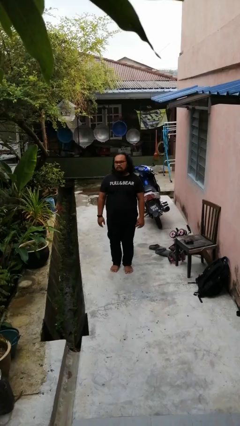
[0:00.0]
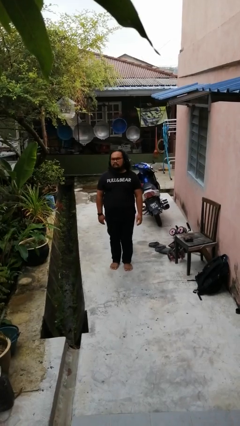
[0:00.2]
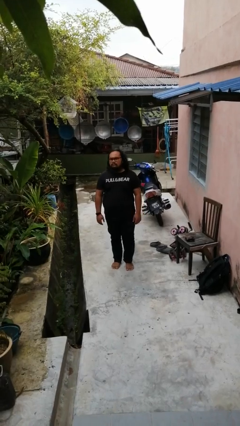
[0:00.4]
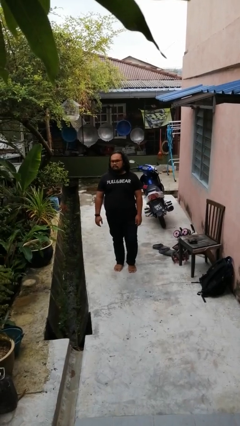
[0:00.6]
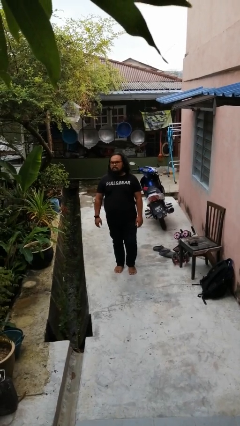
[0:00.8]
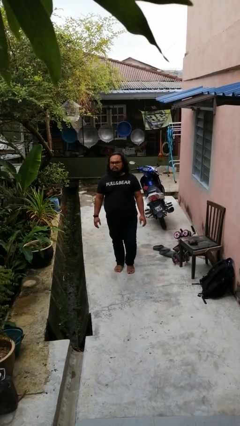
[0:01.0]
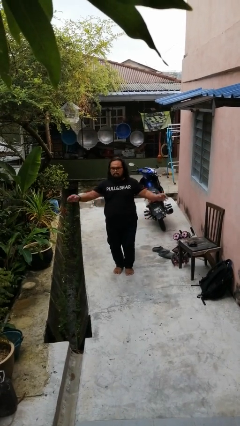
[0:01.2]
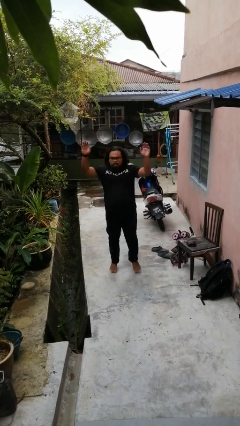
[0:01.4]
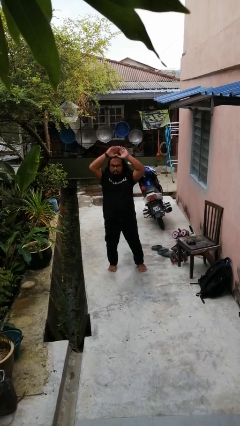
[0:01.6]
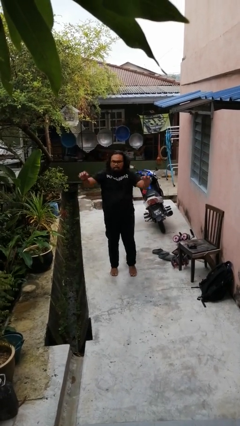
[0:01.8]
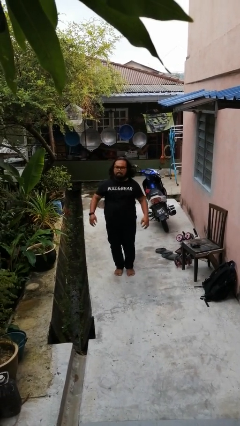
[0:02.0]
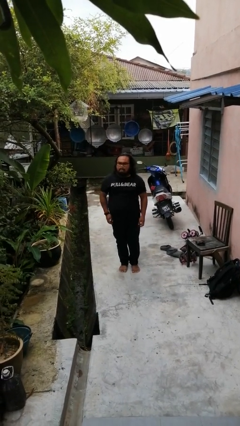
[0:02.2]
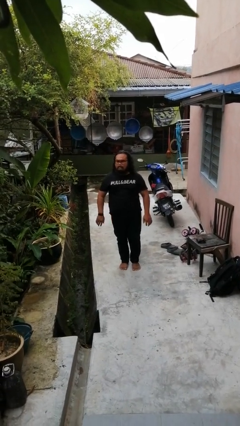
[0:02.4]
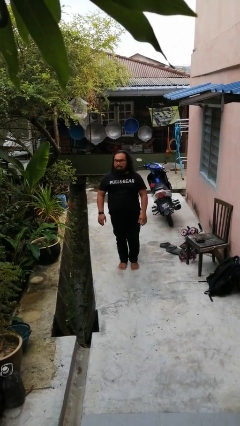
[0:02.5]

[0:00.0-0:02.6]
person exercises with jumping jacks

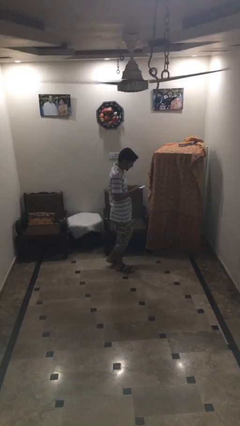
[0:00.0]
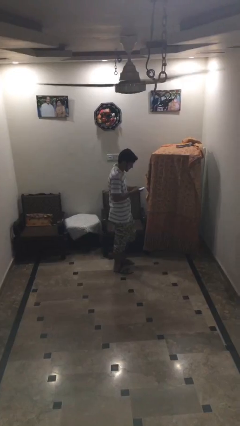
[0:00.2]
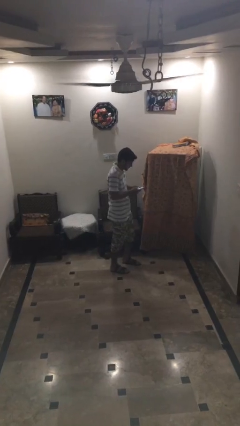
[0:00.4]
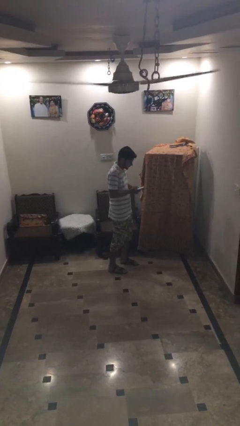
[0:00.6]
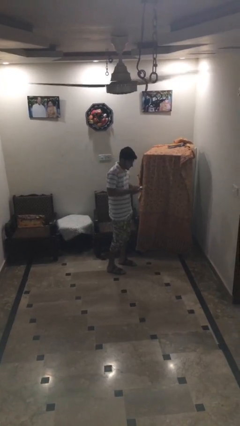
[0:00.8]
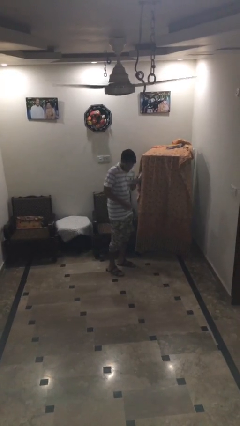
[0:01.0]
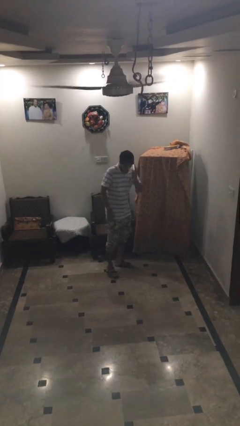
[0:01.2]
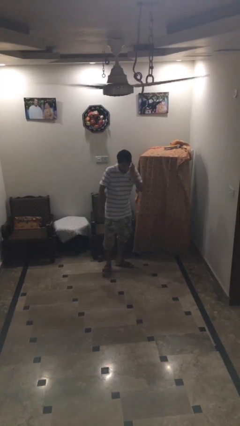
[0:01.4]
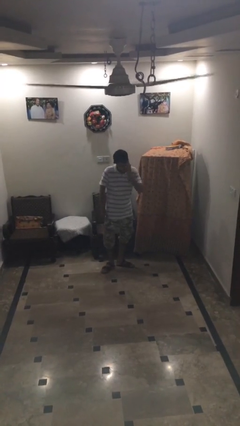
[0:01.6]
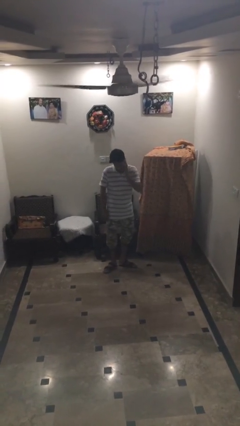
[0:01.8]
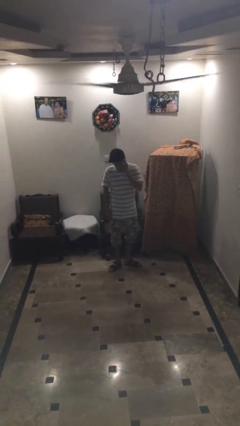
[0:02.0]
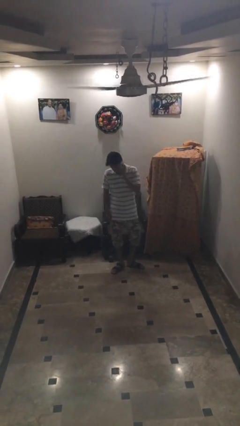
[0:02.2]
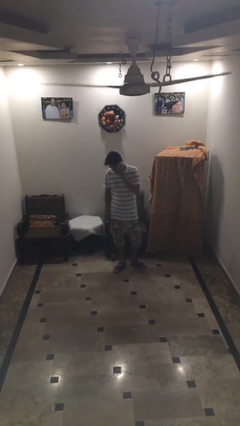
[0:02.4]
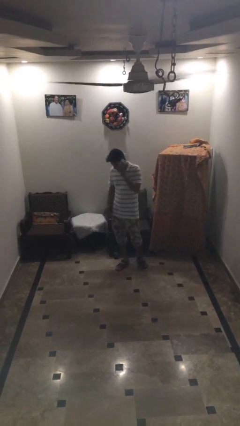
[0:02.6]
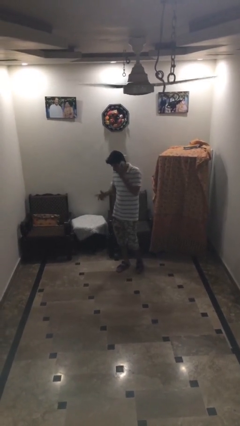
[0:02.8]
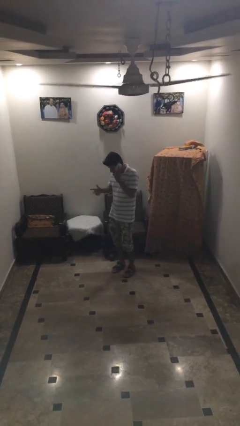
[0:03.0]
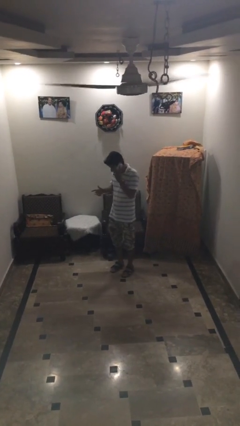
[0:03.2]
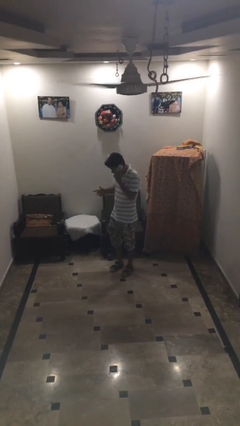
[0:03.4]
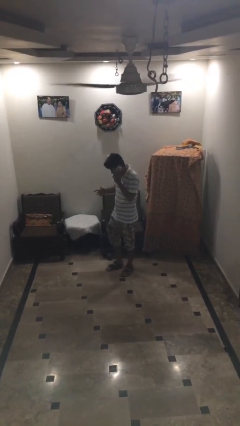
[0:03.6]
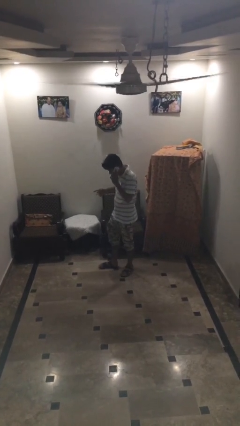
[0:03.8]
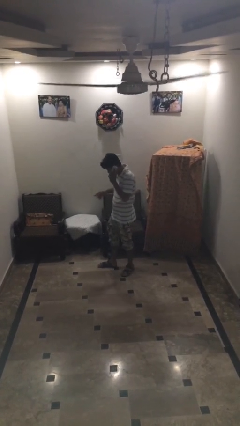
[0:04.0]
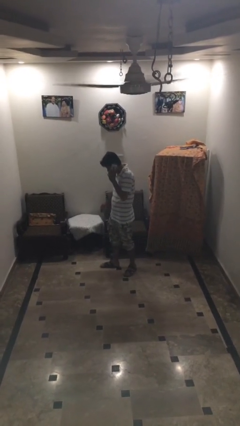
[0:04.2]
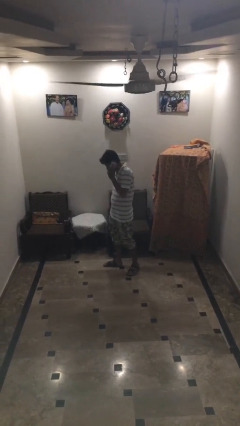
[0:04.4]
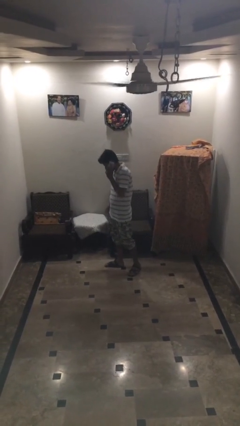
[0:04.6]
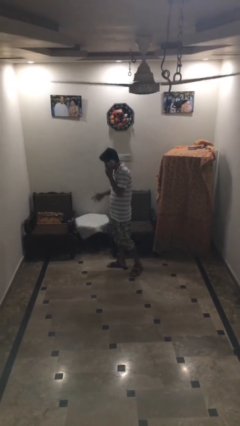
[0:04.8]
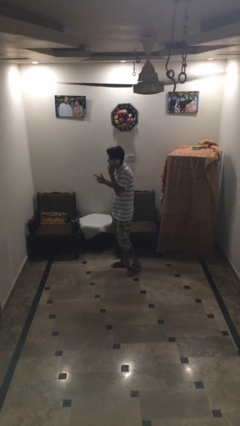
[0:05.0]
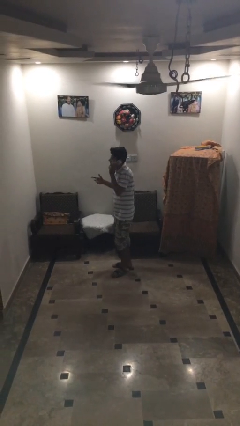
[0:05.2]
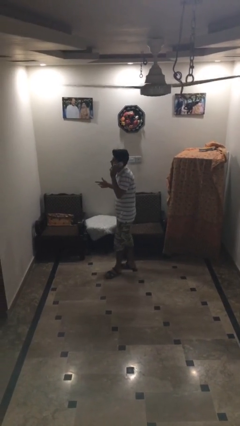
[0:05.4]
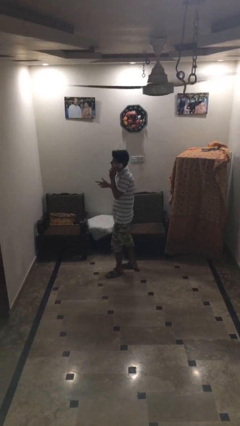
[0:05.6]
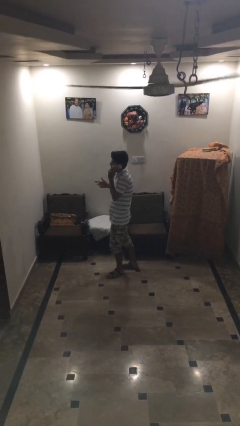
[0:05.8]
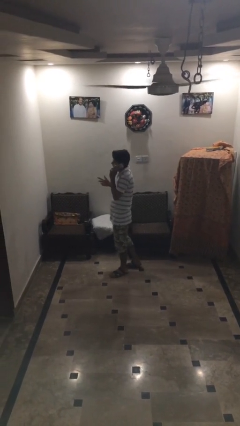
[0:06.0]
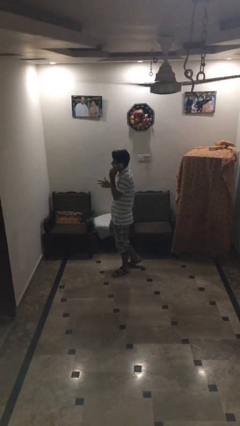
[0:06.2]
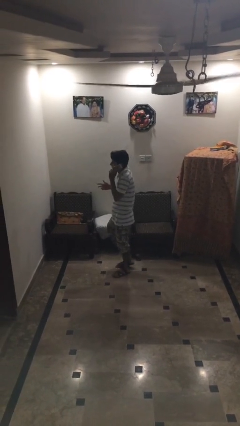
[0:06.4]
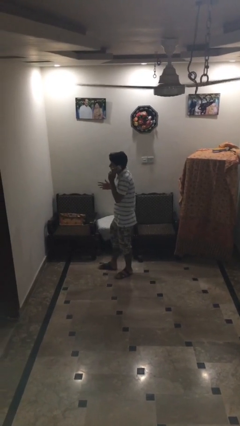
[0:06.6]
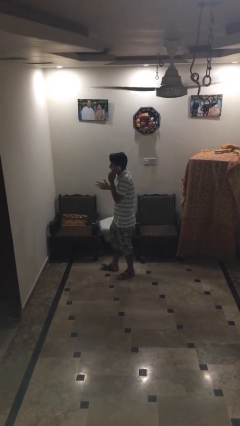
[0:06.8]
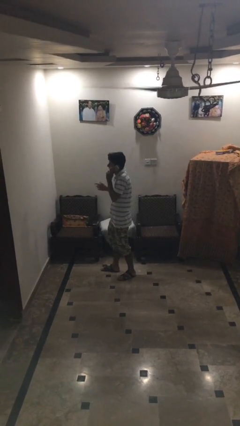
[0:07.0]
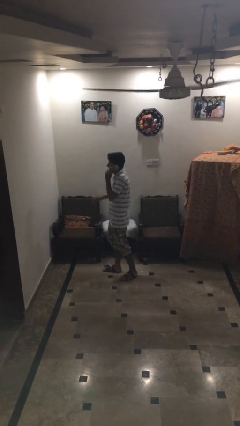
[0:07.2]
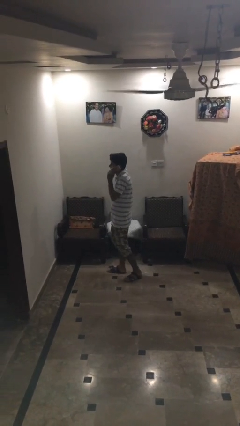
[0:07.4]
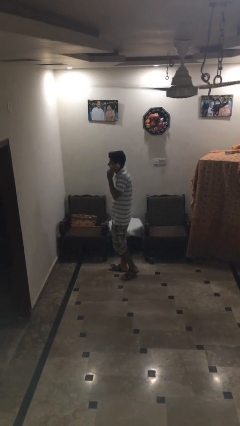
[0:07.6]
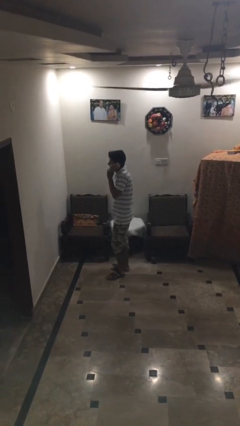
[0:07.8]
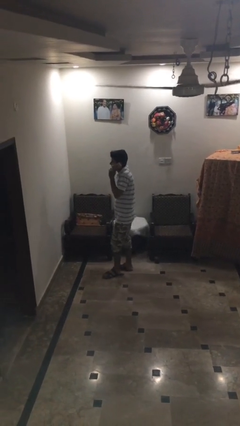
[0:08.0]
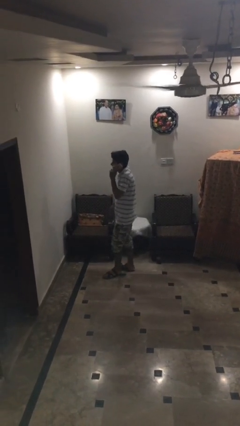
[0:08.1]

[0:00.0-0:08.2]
person talks on phone

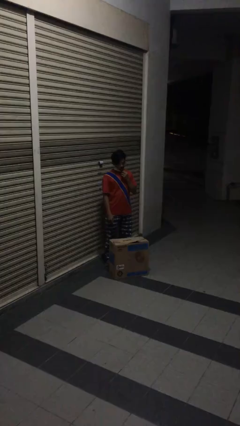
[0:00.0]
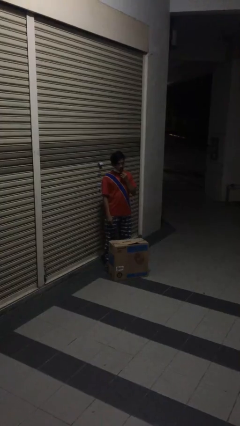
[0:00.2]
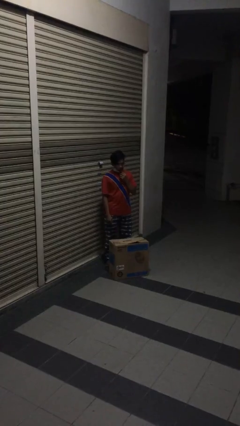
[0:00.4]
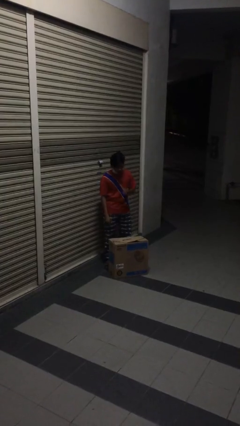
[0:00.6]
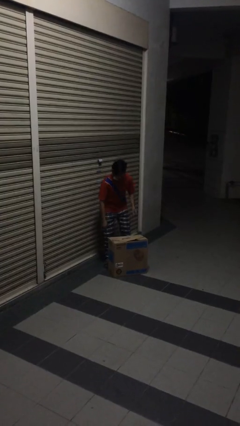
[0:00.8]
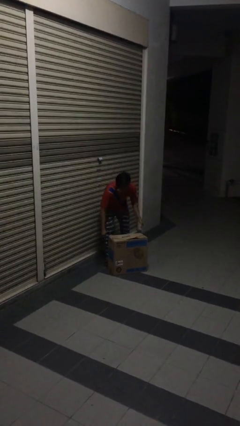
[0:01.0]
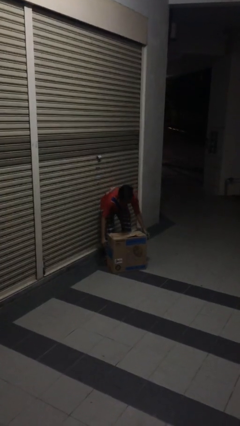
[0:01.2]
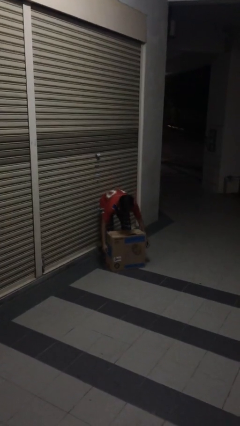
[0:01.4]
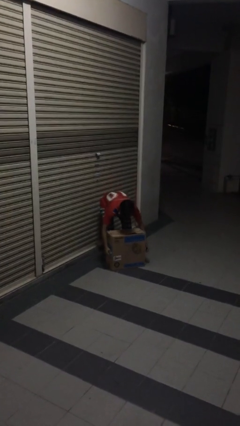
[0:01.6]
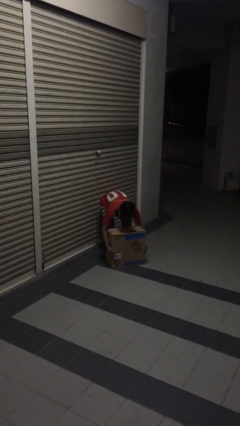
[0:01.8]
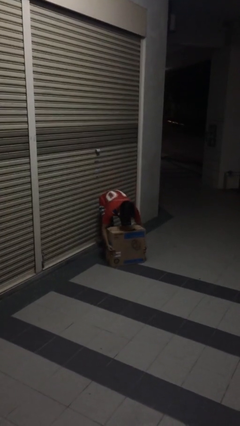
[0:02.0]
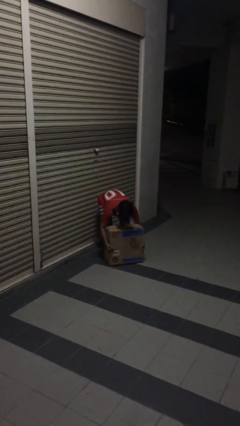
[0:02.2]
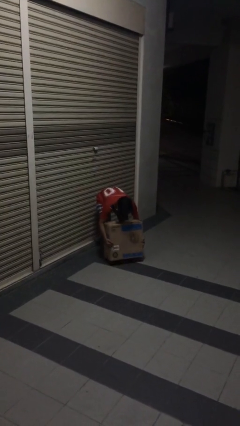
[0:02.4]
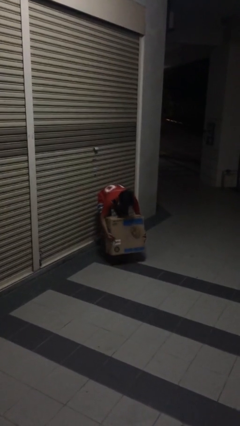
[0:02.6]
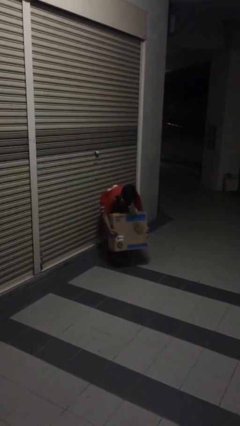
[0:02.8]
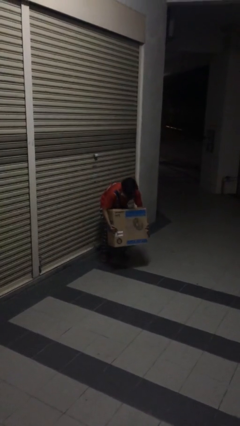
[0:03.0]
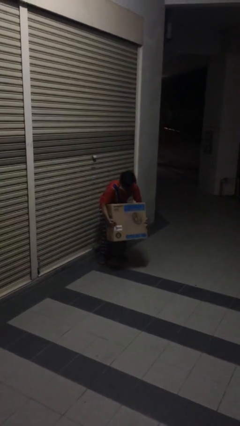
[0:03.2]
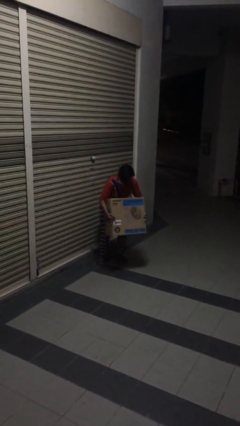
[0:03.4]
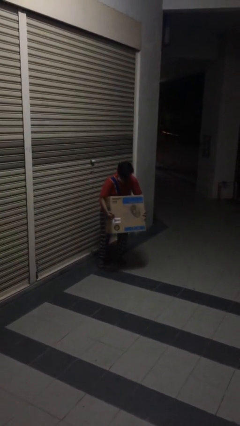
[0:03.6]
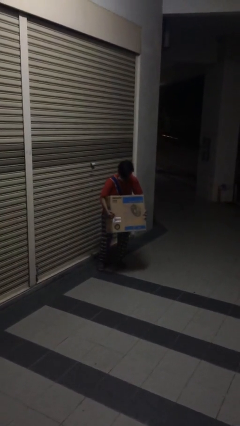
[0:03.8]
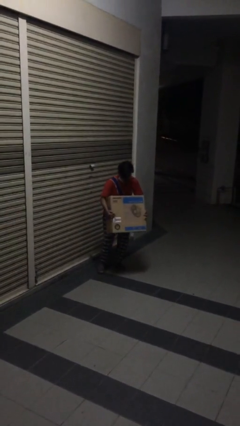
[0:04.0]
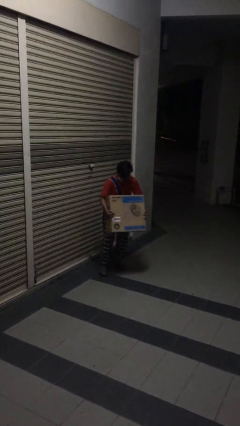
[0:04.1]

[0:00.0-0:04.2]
person picks up object from floor

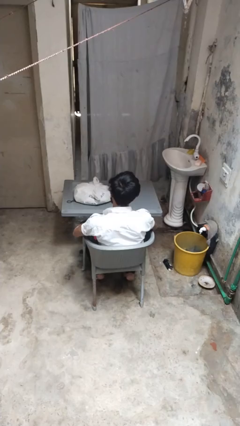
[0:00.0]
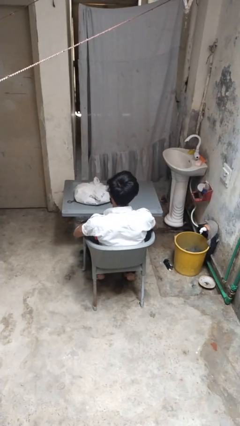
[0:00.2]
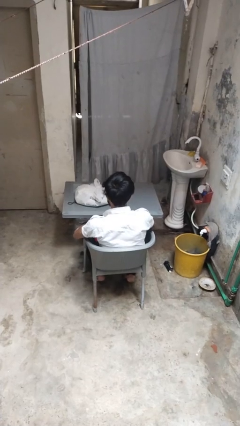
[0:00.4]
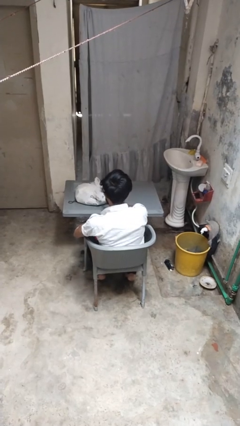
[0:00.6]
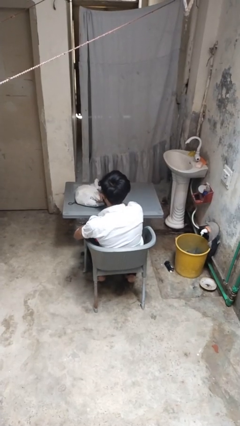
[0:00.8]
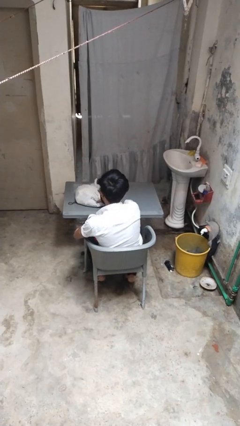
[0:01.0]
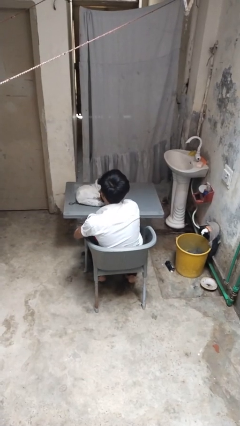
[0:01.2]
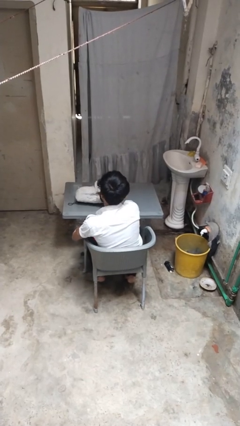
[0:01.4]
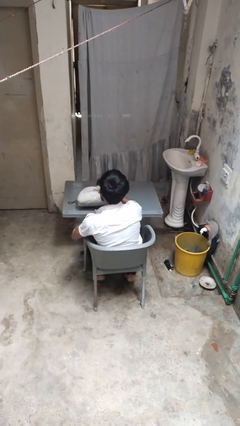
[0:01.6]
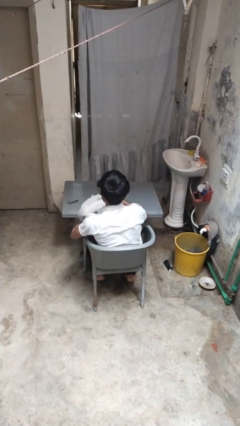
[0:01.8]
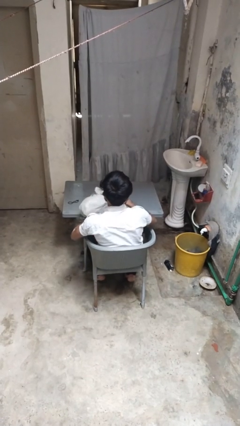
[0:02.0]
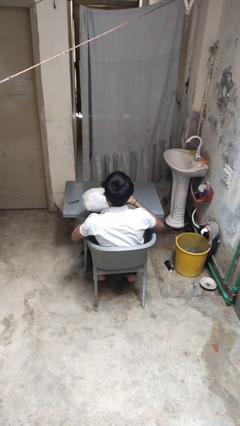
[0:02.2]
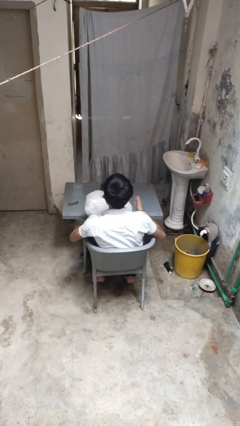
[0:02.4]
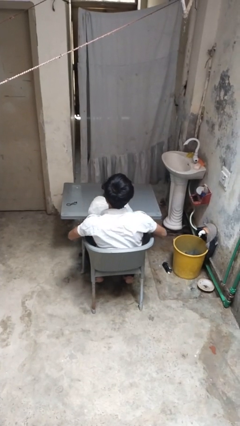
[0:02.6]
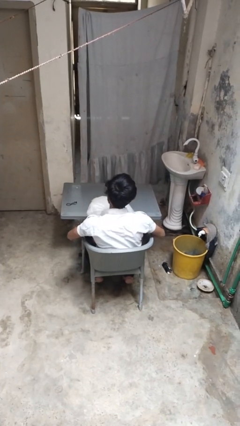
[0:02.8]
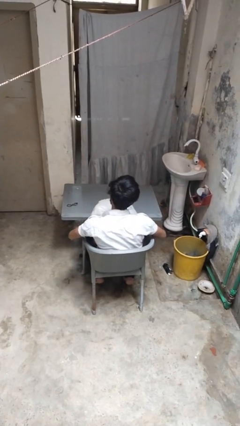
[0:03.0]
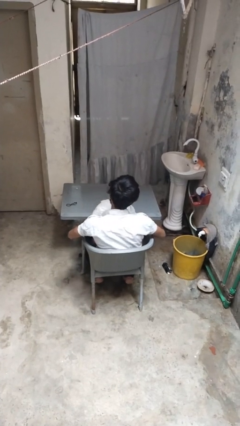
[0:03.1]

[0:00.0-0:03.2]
person picks up object from table
